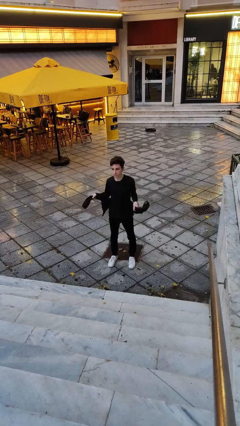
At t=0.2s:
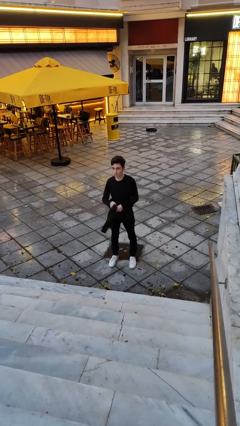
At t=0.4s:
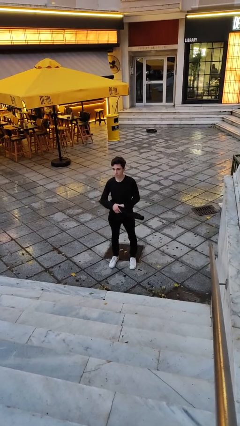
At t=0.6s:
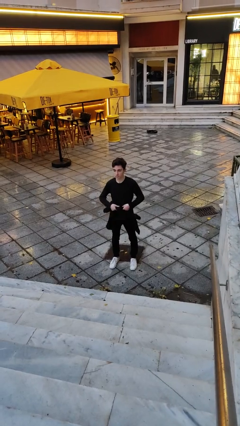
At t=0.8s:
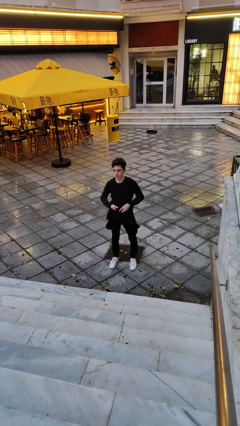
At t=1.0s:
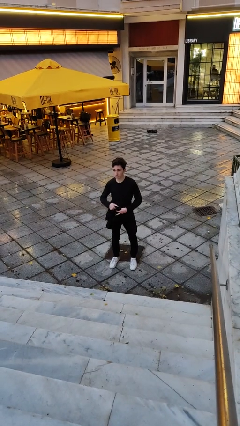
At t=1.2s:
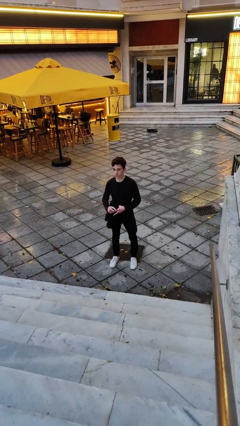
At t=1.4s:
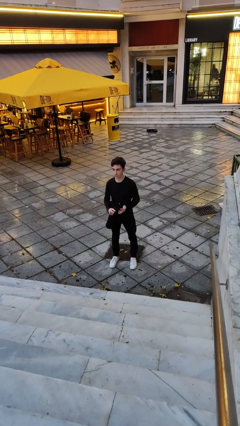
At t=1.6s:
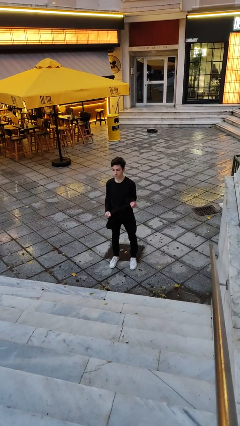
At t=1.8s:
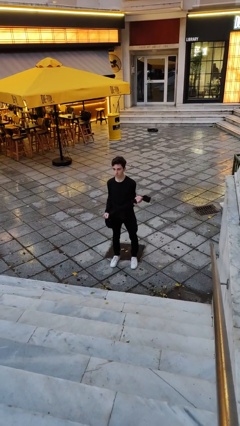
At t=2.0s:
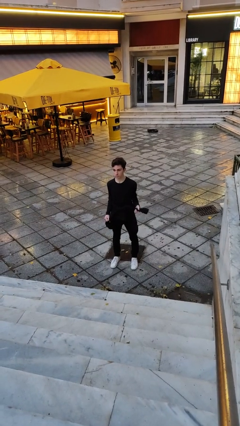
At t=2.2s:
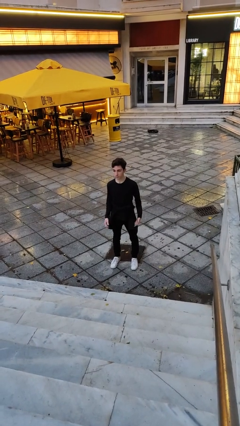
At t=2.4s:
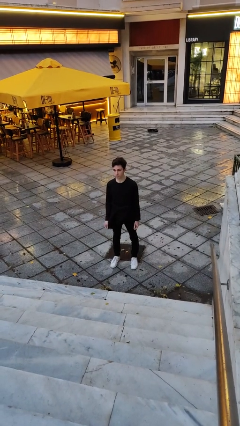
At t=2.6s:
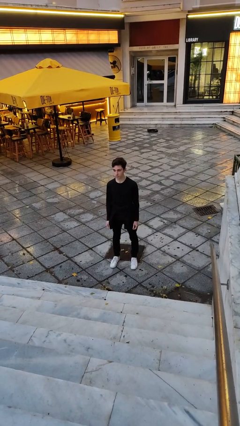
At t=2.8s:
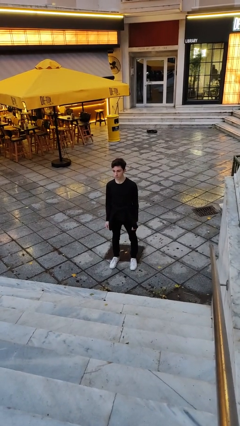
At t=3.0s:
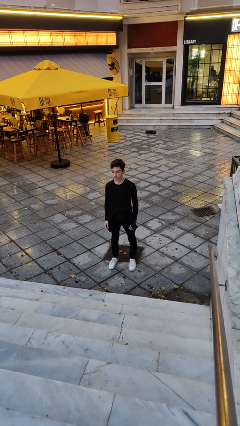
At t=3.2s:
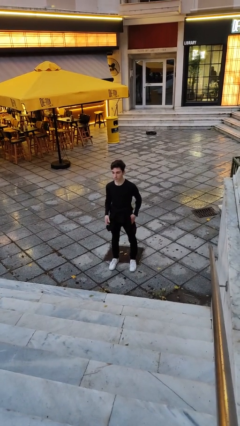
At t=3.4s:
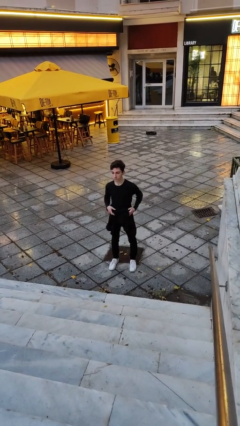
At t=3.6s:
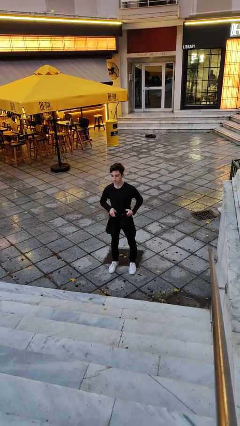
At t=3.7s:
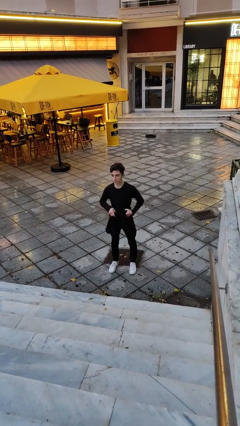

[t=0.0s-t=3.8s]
person ties jacket around waist

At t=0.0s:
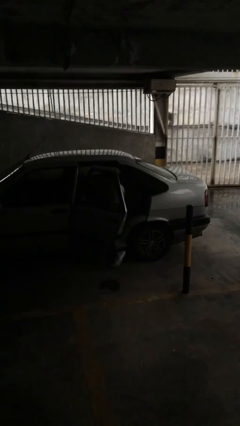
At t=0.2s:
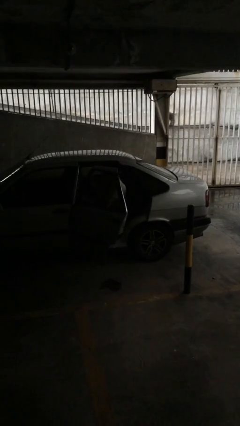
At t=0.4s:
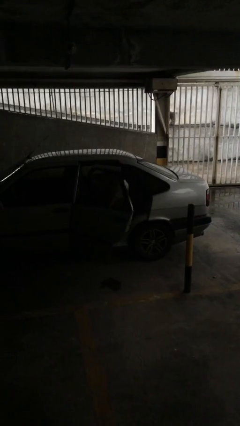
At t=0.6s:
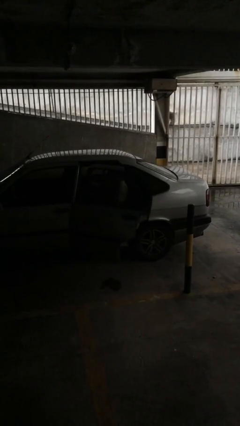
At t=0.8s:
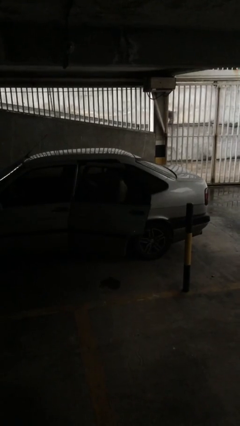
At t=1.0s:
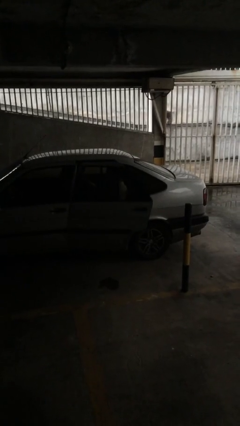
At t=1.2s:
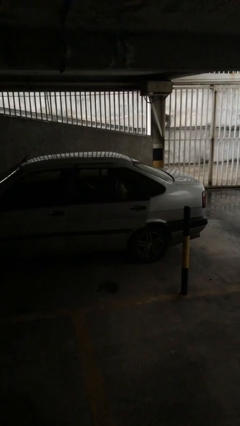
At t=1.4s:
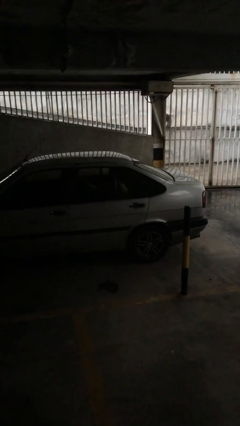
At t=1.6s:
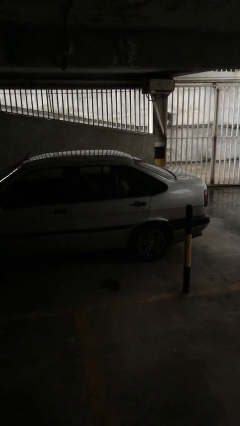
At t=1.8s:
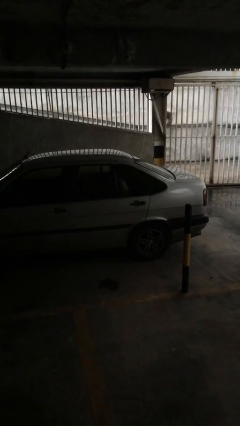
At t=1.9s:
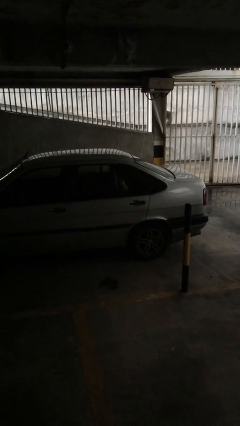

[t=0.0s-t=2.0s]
person closes car door

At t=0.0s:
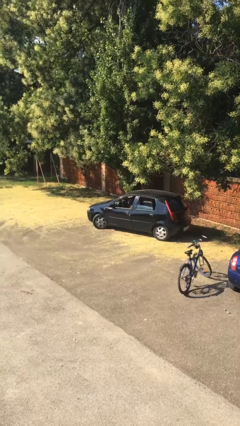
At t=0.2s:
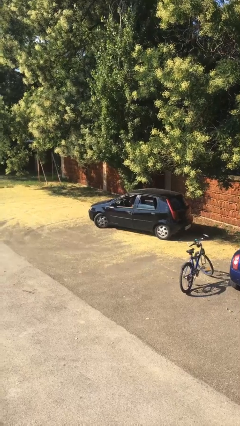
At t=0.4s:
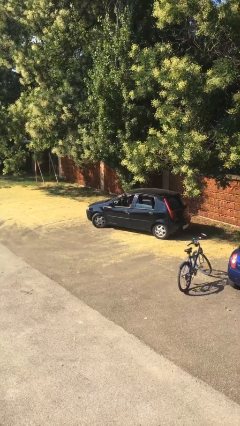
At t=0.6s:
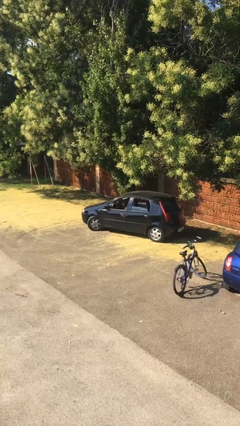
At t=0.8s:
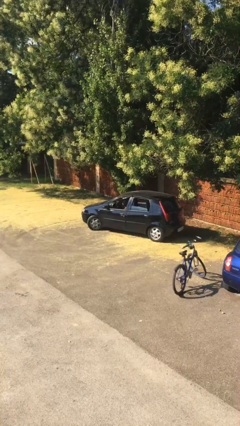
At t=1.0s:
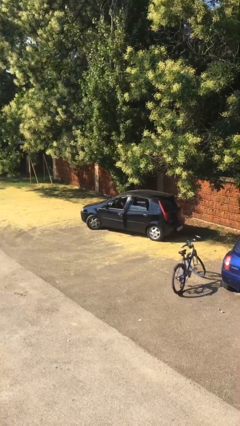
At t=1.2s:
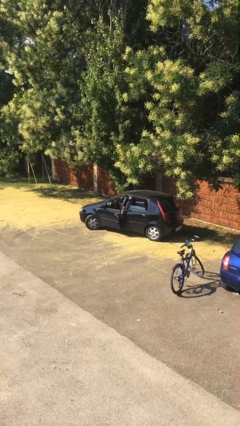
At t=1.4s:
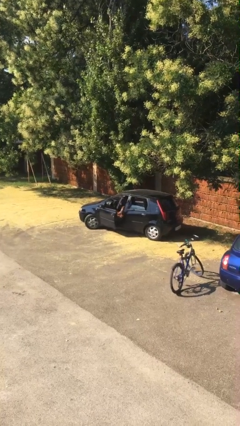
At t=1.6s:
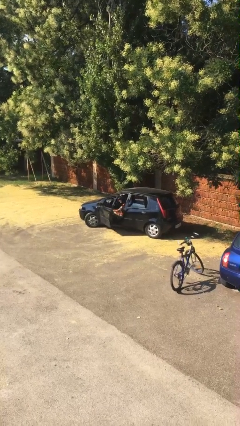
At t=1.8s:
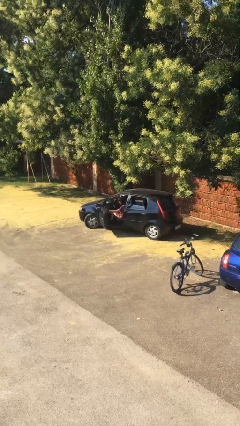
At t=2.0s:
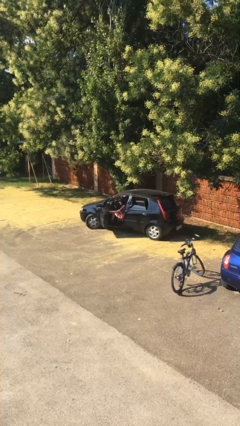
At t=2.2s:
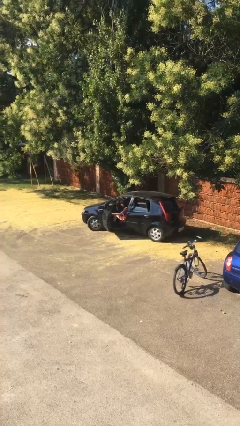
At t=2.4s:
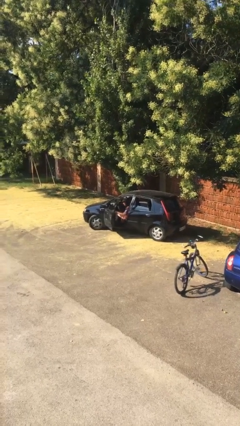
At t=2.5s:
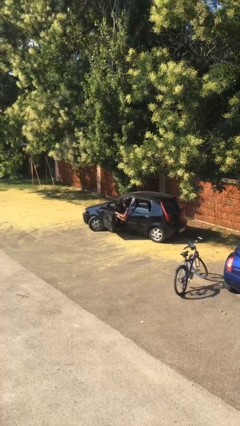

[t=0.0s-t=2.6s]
person opens car door

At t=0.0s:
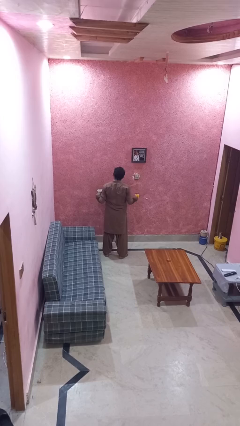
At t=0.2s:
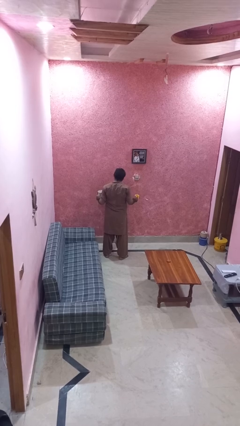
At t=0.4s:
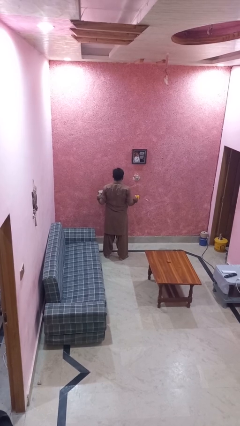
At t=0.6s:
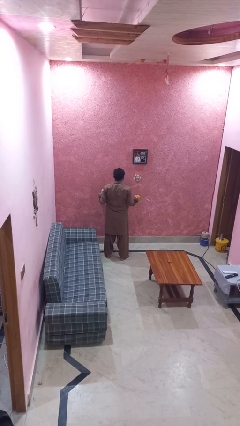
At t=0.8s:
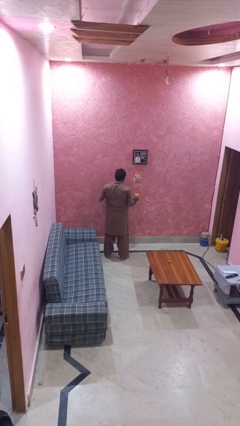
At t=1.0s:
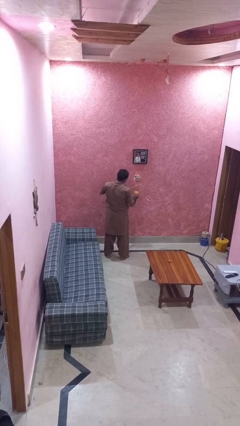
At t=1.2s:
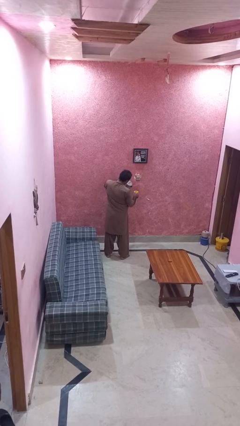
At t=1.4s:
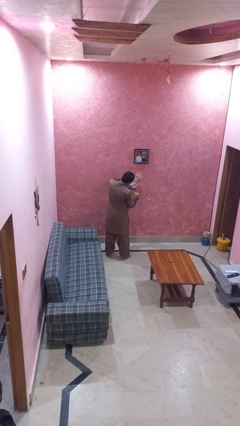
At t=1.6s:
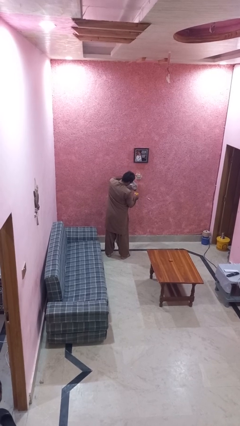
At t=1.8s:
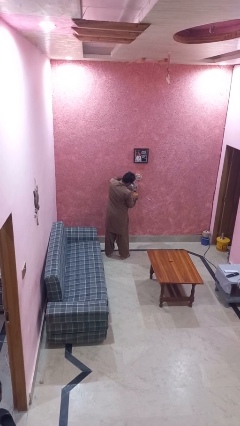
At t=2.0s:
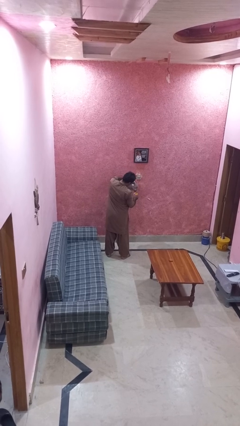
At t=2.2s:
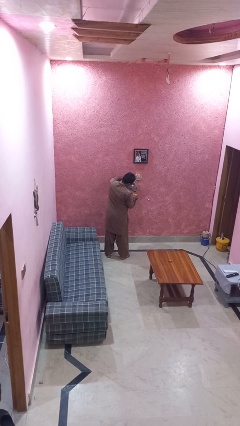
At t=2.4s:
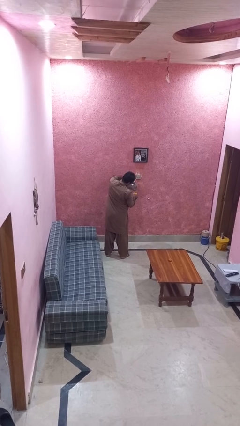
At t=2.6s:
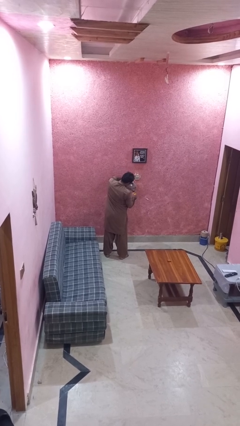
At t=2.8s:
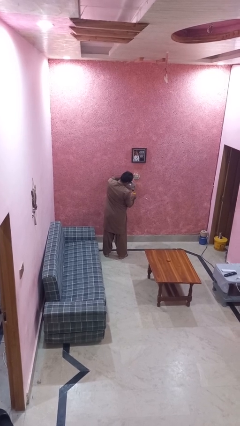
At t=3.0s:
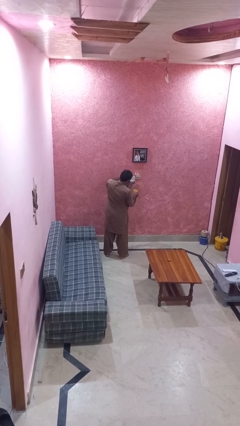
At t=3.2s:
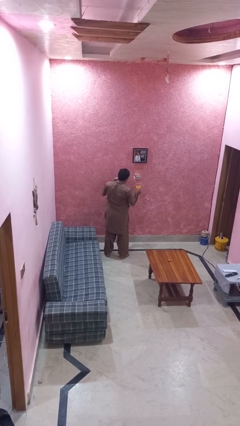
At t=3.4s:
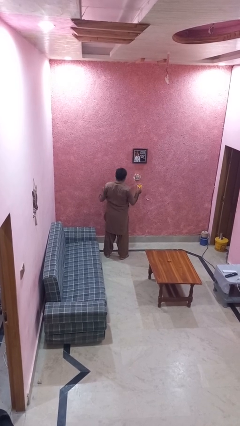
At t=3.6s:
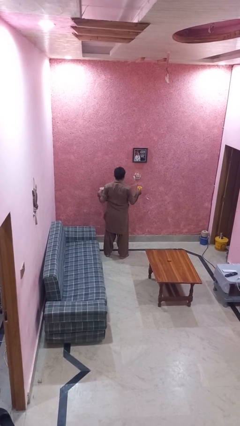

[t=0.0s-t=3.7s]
person pours coffee into mug

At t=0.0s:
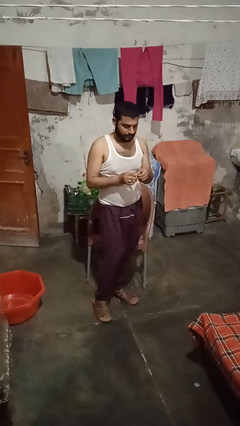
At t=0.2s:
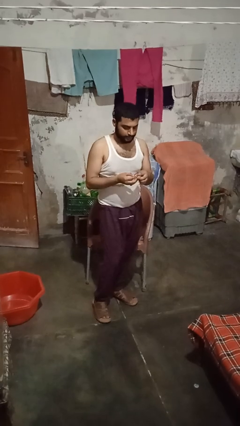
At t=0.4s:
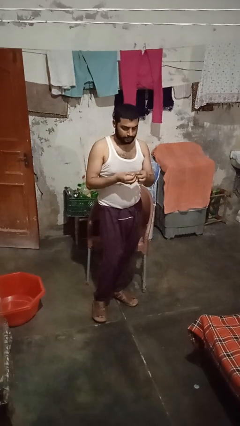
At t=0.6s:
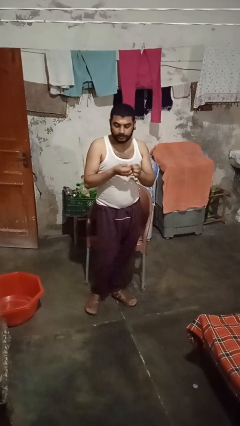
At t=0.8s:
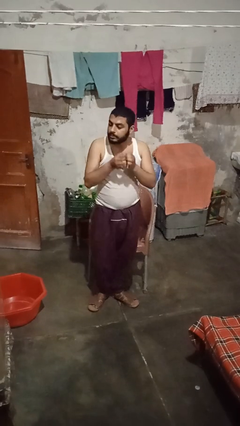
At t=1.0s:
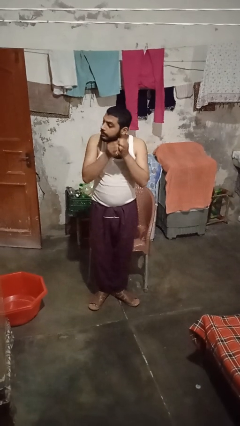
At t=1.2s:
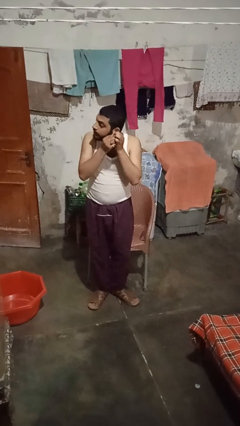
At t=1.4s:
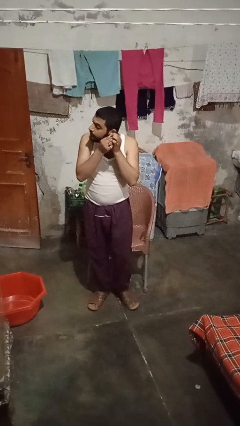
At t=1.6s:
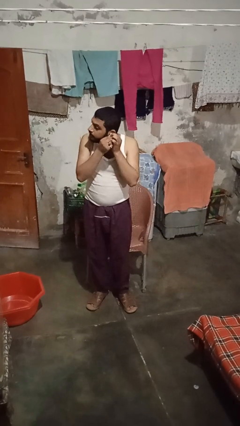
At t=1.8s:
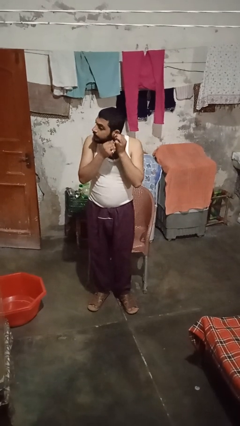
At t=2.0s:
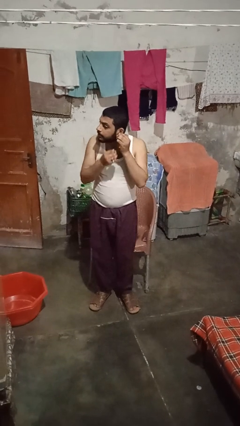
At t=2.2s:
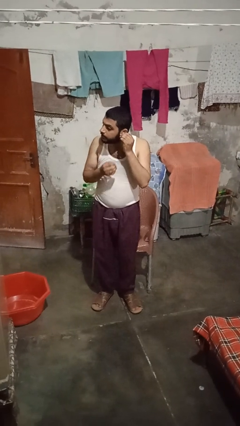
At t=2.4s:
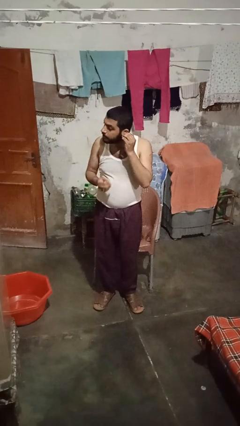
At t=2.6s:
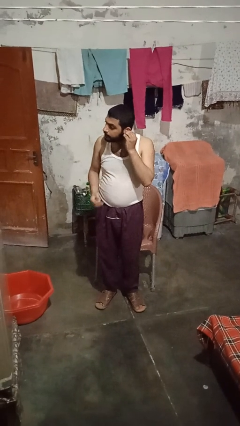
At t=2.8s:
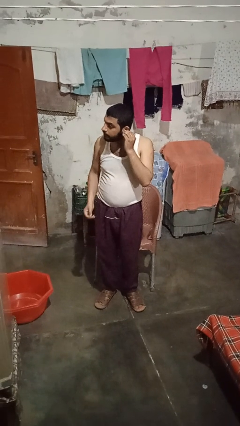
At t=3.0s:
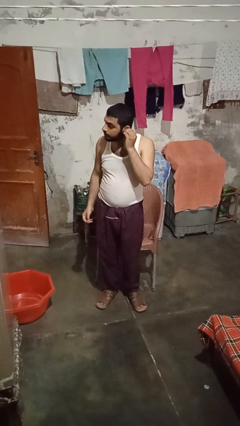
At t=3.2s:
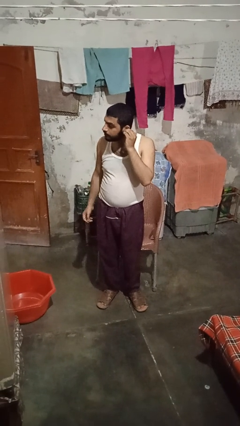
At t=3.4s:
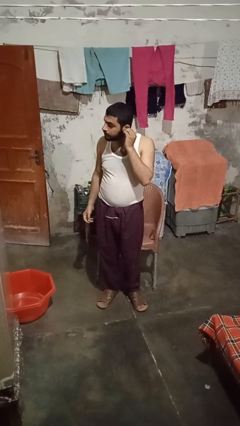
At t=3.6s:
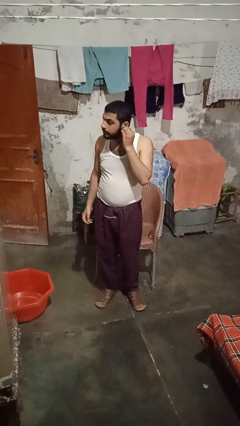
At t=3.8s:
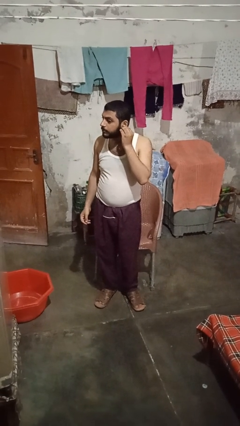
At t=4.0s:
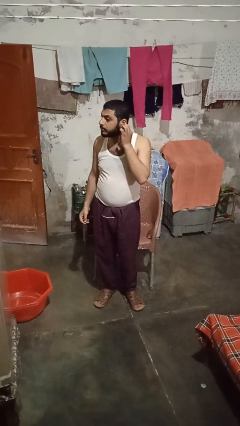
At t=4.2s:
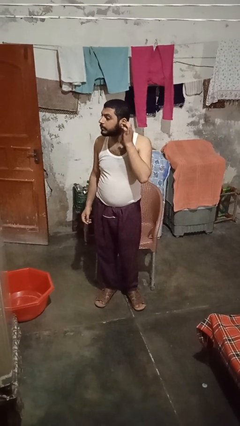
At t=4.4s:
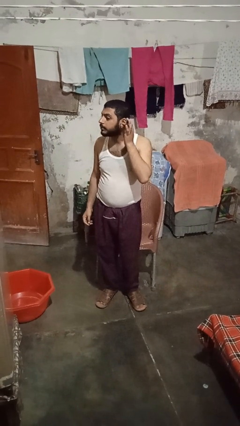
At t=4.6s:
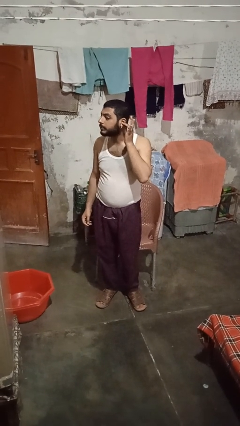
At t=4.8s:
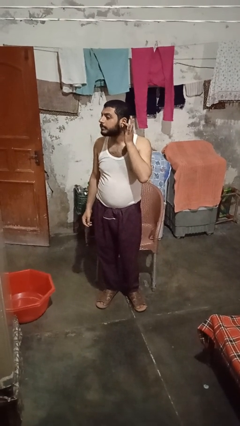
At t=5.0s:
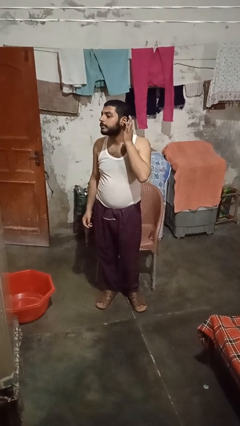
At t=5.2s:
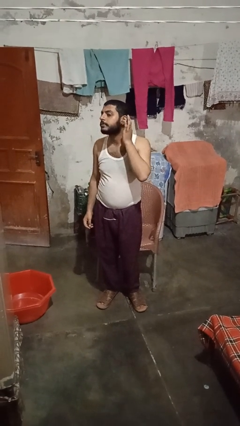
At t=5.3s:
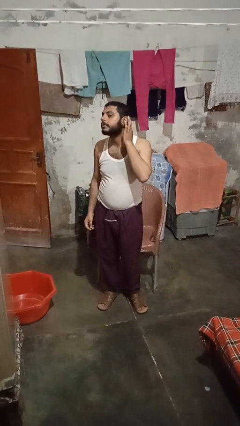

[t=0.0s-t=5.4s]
person puts on earrings
